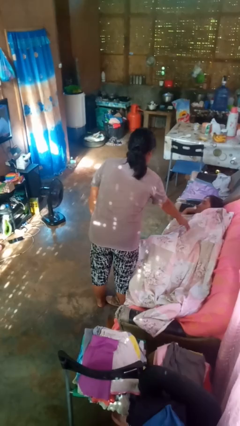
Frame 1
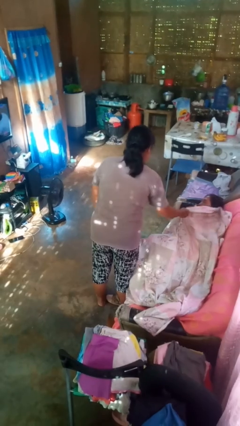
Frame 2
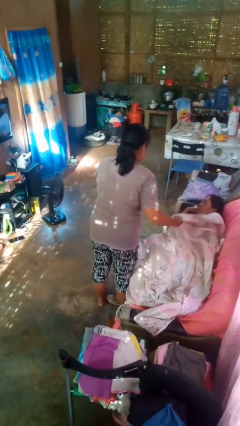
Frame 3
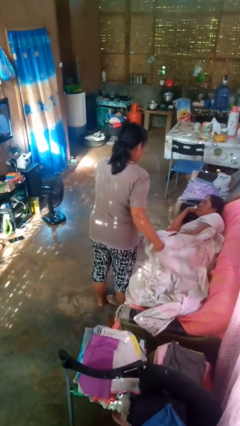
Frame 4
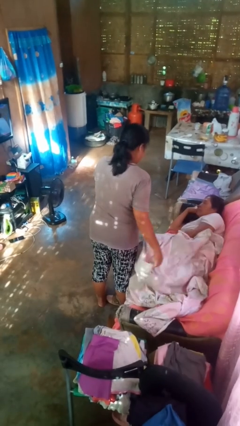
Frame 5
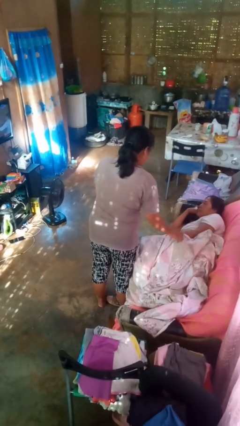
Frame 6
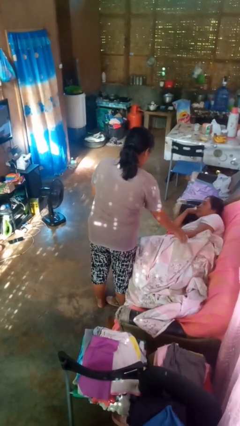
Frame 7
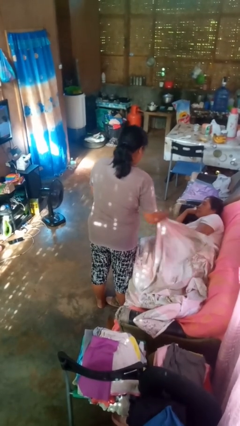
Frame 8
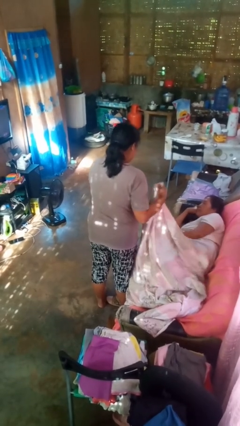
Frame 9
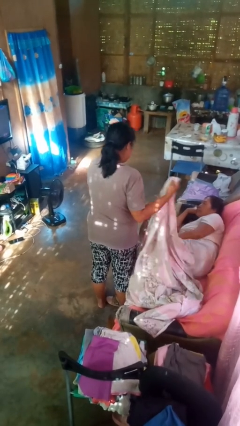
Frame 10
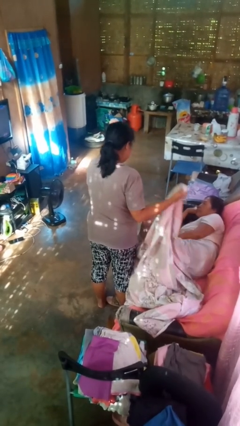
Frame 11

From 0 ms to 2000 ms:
person uncovers friend with blanket

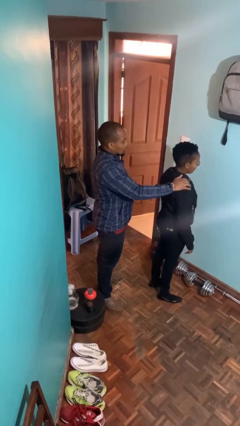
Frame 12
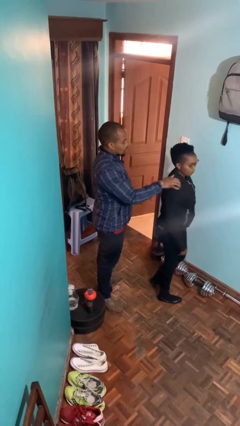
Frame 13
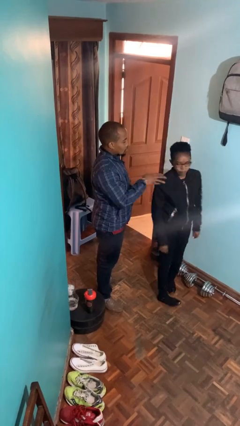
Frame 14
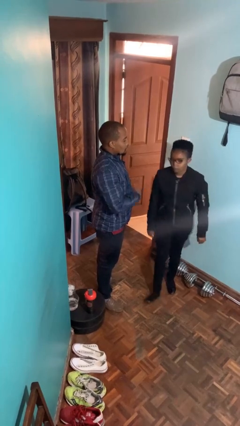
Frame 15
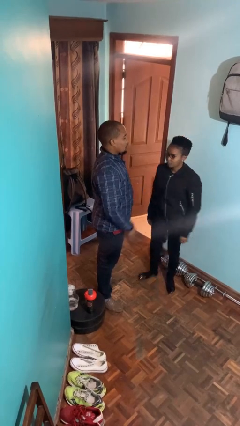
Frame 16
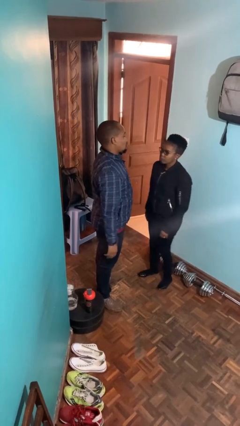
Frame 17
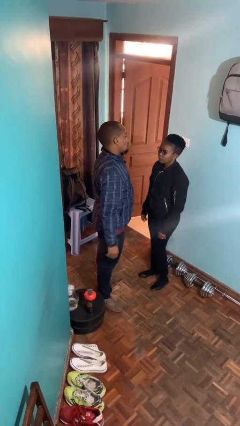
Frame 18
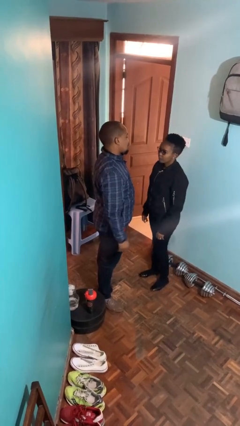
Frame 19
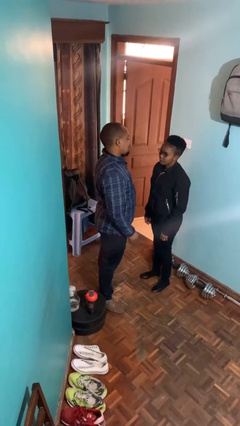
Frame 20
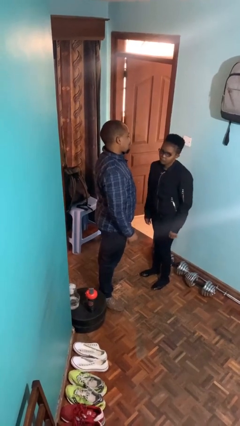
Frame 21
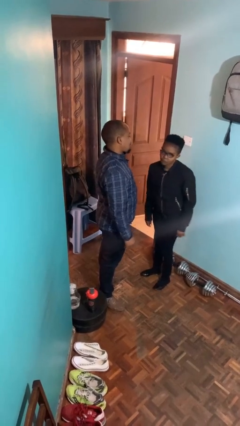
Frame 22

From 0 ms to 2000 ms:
person spins person around

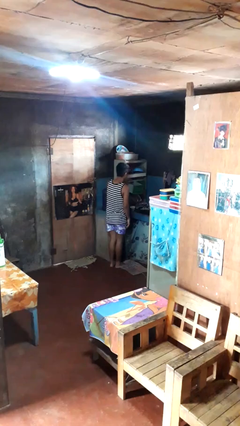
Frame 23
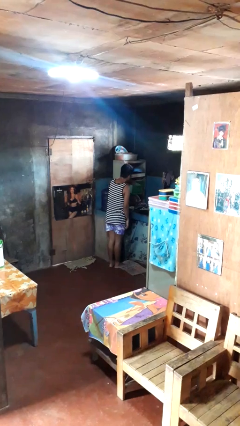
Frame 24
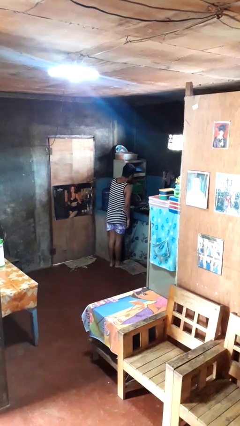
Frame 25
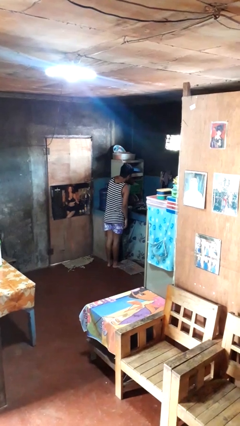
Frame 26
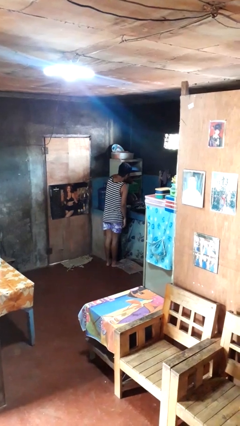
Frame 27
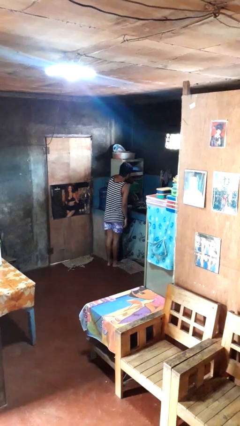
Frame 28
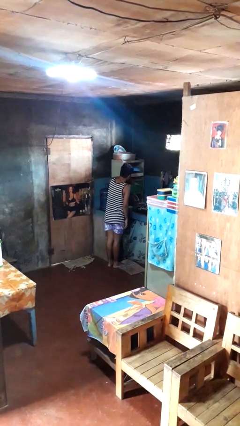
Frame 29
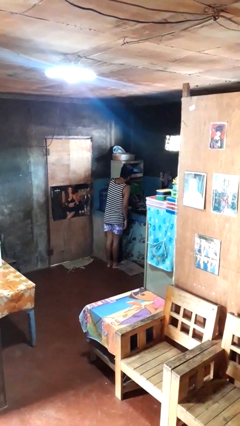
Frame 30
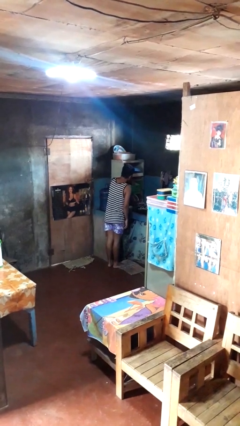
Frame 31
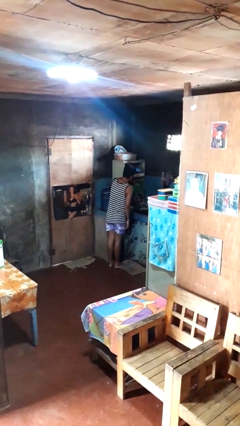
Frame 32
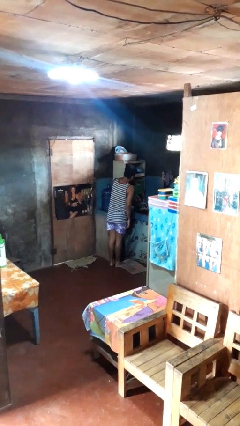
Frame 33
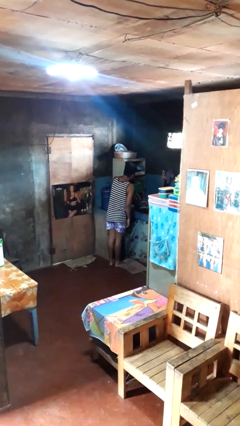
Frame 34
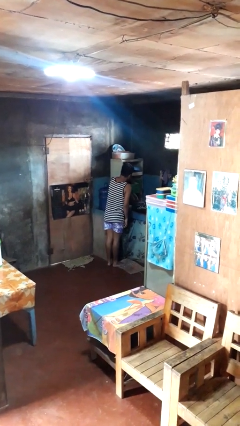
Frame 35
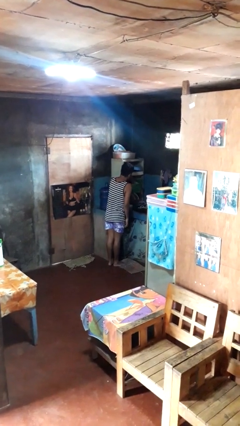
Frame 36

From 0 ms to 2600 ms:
person searches in kitchen drawer

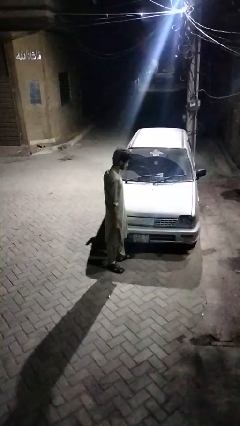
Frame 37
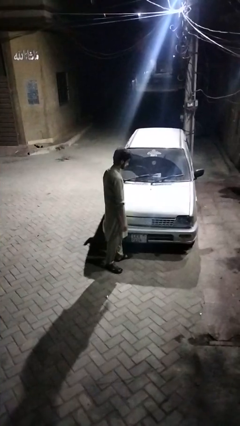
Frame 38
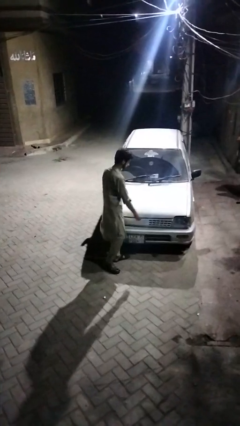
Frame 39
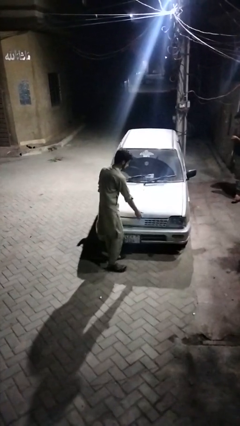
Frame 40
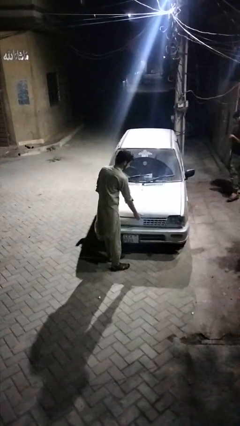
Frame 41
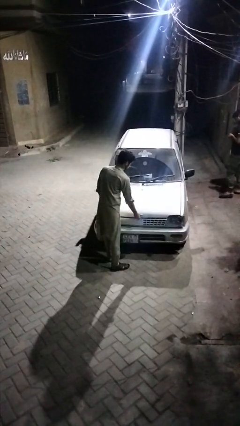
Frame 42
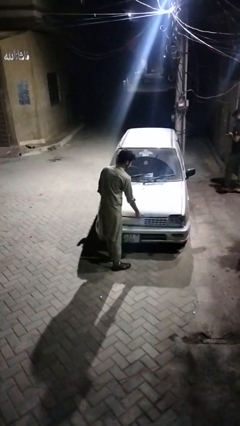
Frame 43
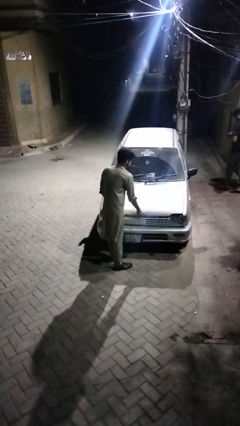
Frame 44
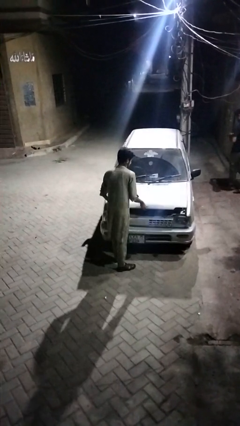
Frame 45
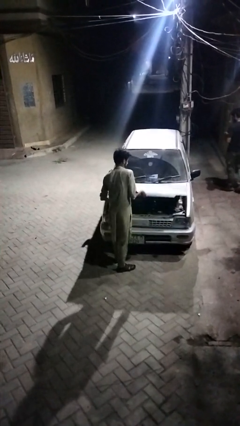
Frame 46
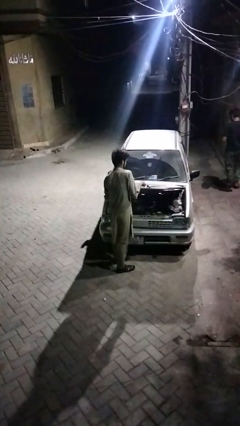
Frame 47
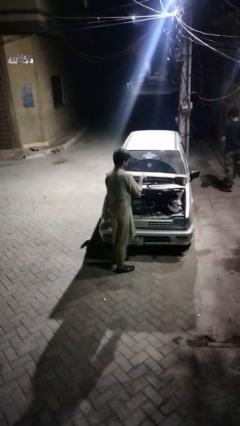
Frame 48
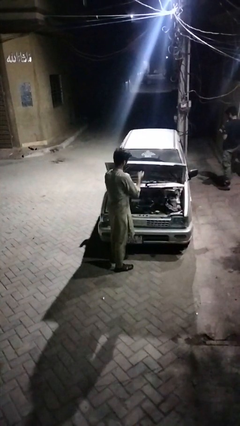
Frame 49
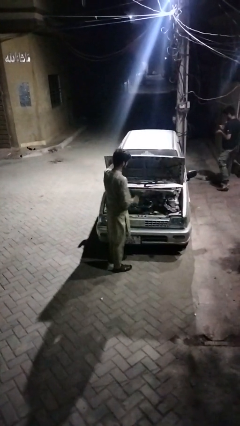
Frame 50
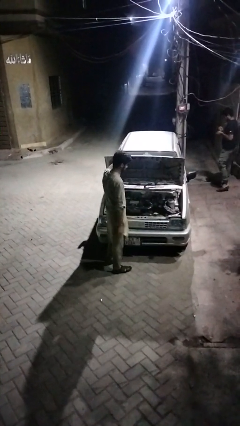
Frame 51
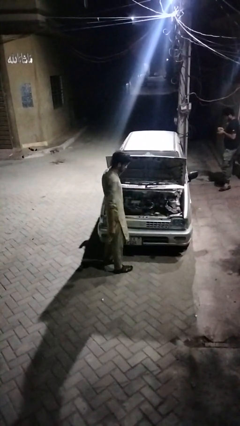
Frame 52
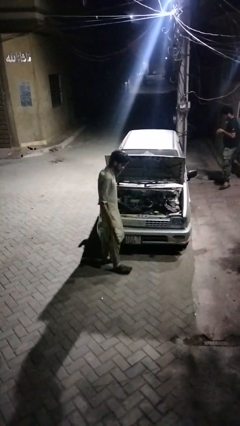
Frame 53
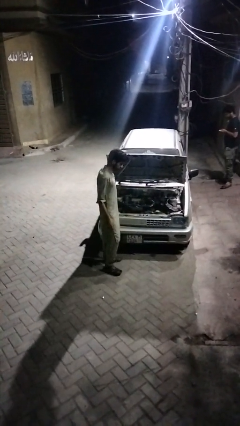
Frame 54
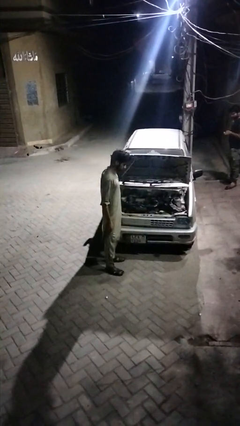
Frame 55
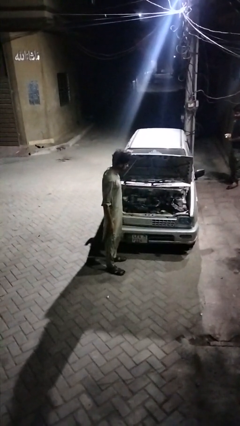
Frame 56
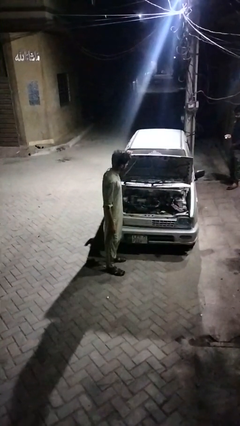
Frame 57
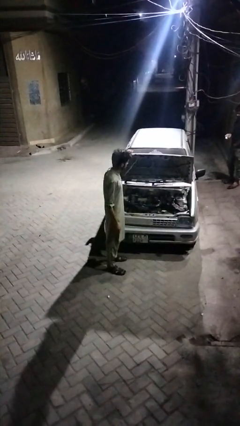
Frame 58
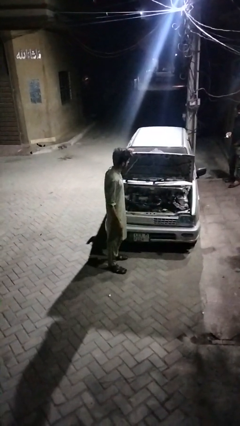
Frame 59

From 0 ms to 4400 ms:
person opens car hood

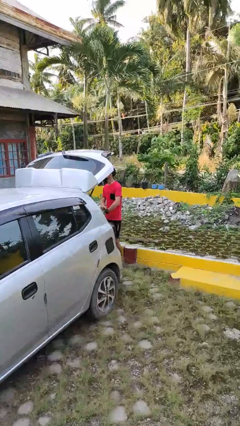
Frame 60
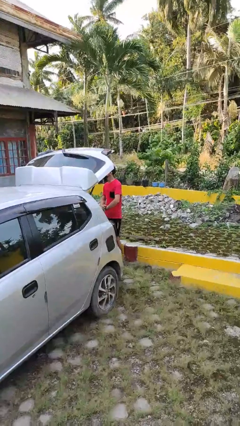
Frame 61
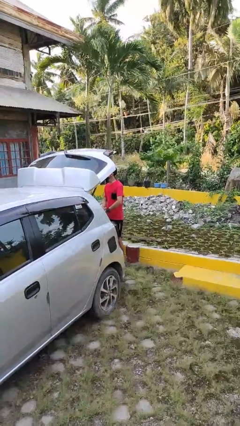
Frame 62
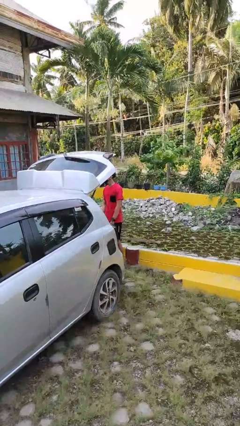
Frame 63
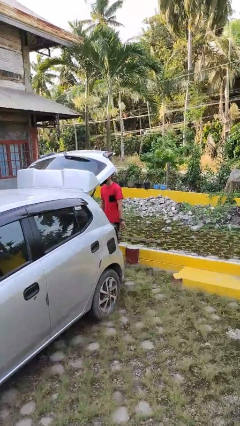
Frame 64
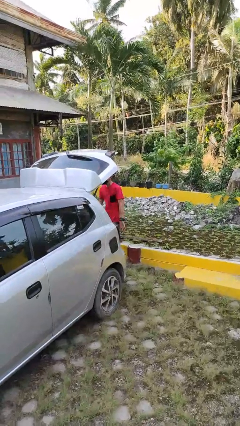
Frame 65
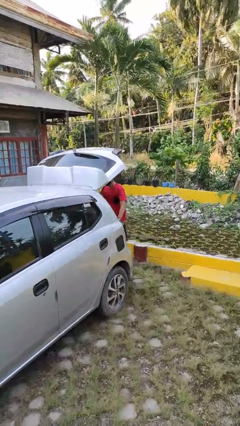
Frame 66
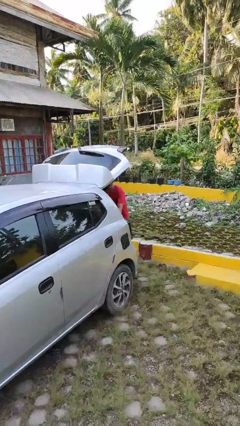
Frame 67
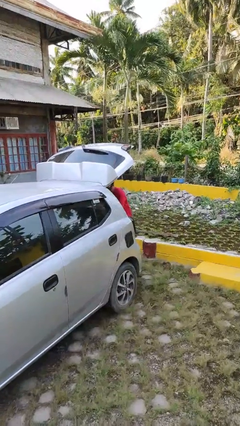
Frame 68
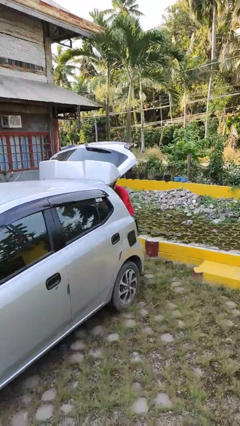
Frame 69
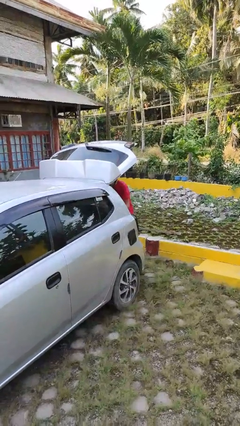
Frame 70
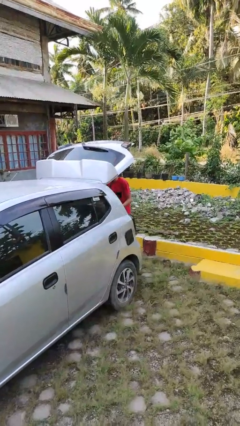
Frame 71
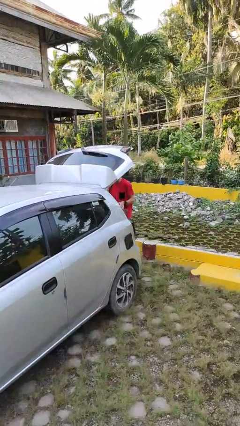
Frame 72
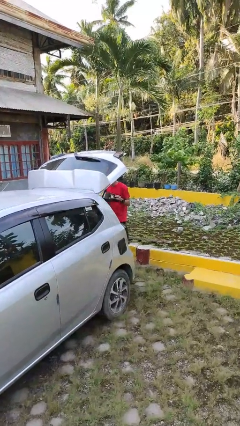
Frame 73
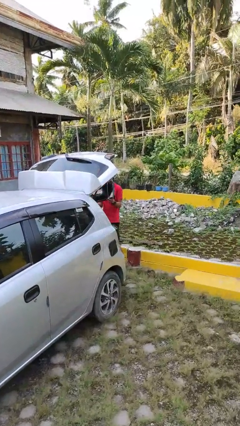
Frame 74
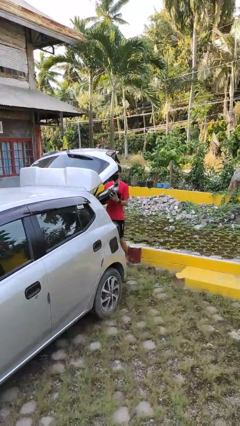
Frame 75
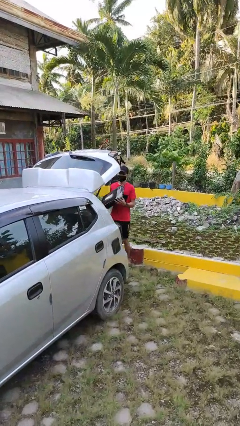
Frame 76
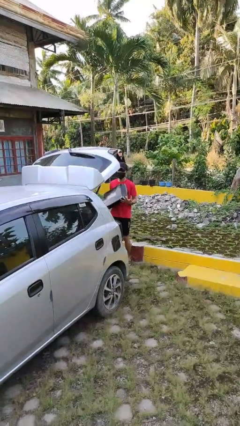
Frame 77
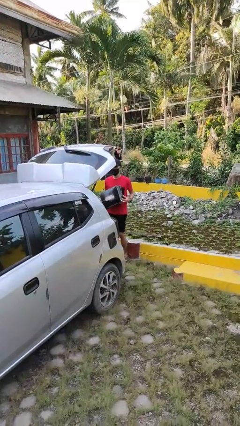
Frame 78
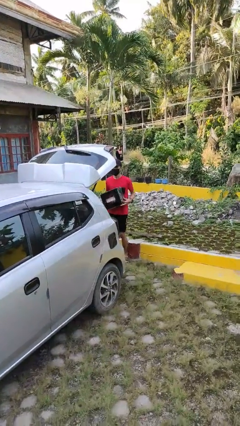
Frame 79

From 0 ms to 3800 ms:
person unloads car

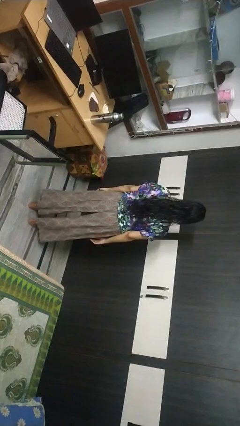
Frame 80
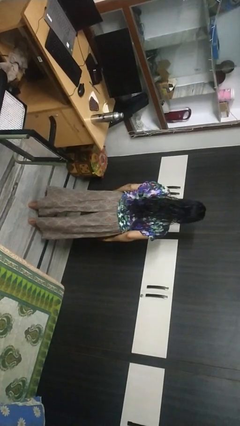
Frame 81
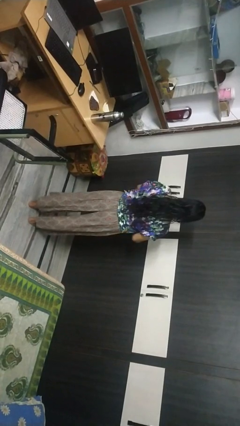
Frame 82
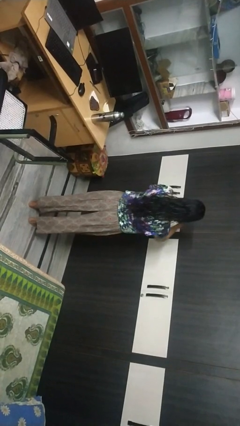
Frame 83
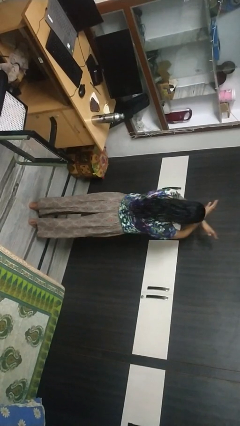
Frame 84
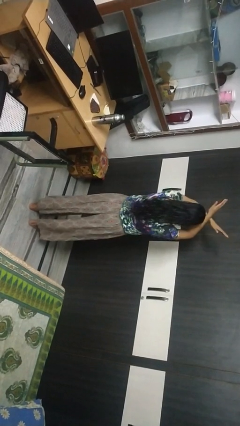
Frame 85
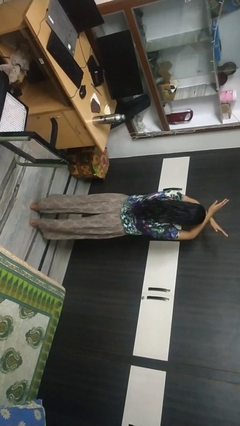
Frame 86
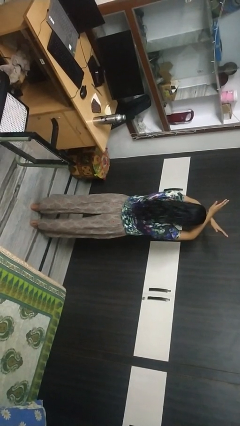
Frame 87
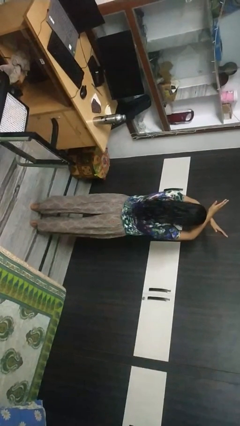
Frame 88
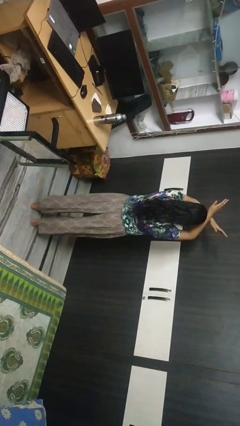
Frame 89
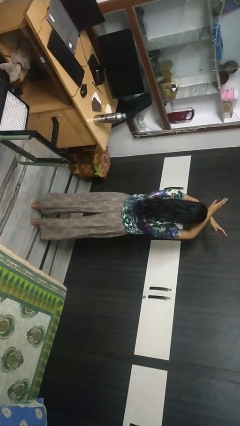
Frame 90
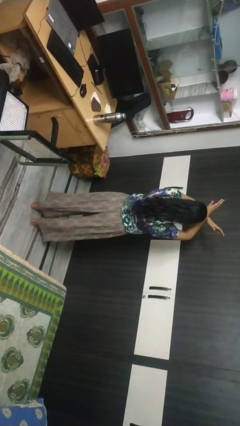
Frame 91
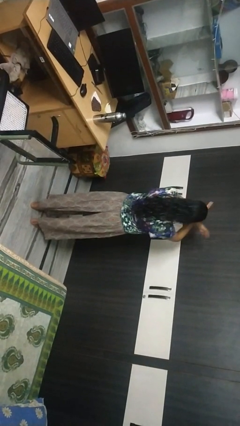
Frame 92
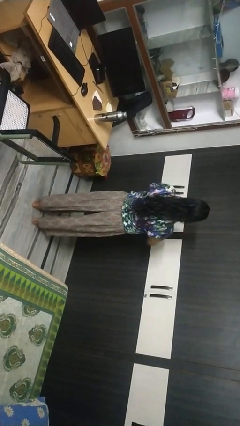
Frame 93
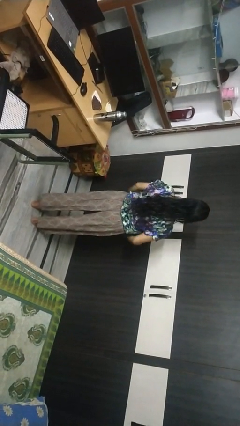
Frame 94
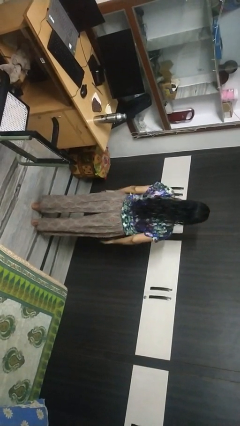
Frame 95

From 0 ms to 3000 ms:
person gestures arms x
